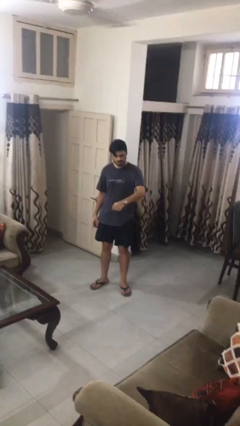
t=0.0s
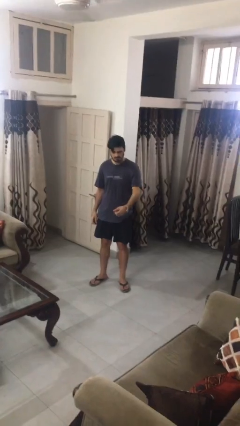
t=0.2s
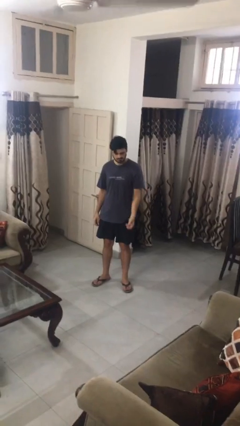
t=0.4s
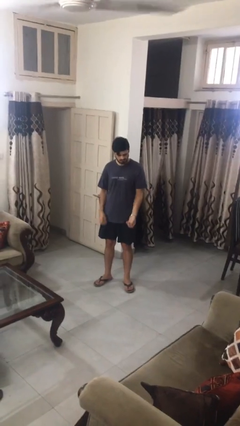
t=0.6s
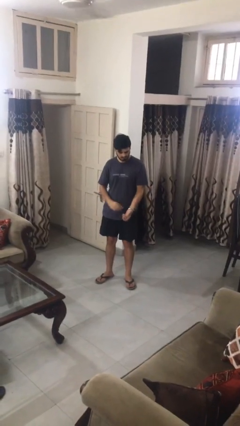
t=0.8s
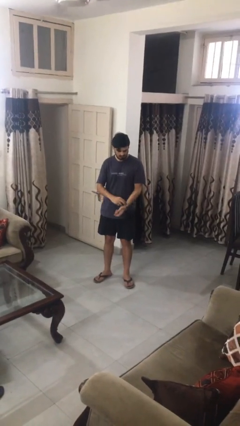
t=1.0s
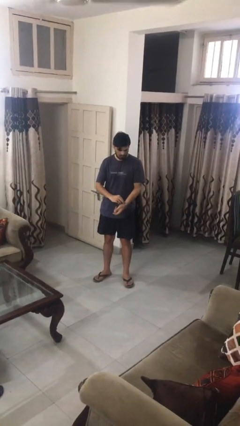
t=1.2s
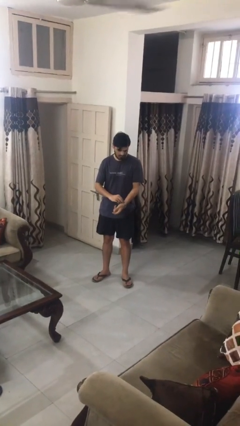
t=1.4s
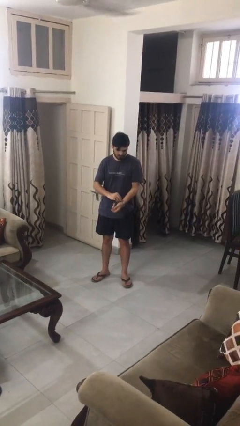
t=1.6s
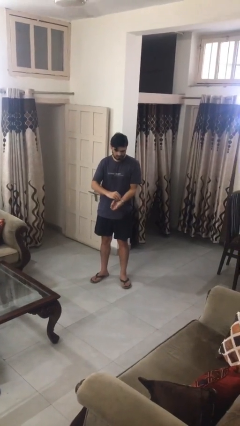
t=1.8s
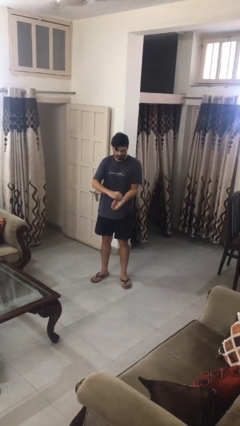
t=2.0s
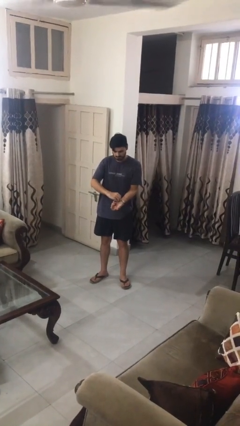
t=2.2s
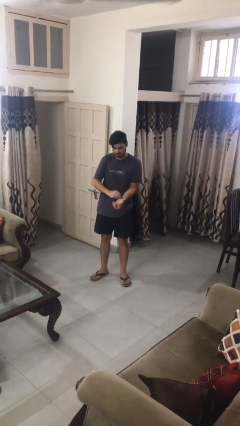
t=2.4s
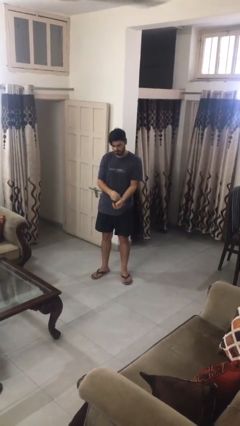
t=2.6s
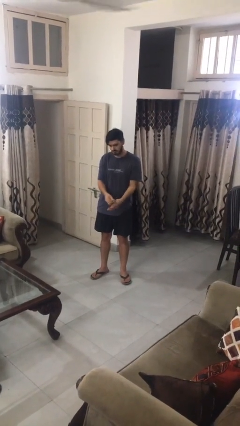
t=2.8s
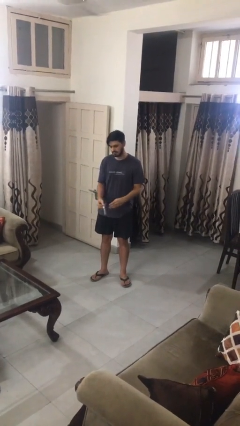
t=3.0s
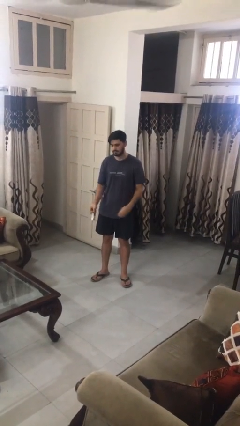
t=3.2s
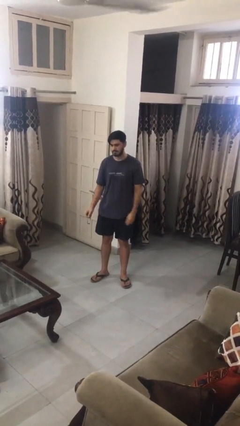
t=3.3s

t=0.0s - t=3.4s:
person takes off wristwatch

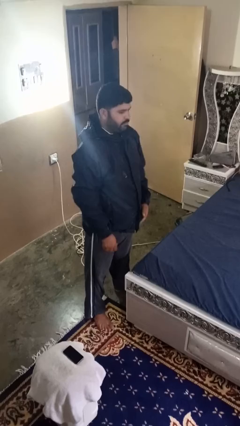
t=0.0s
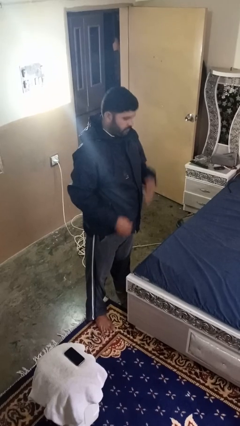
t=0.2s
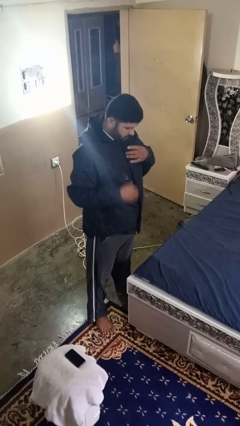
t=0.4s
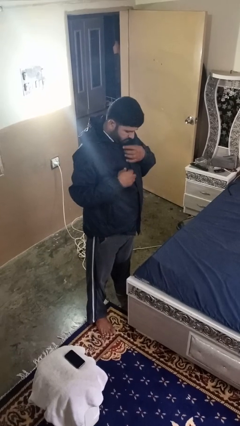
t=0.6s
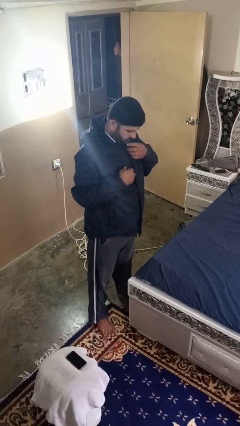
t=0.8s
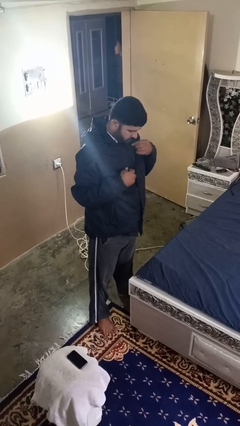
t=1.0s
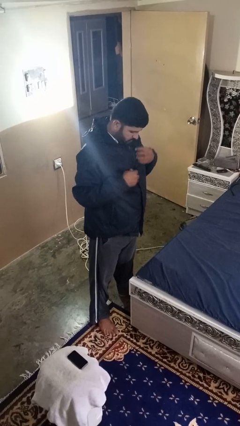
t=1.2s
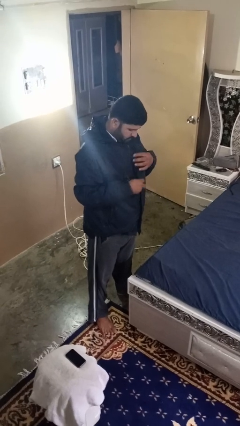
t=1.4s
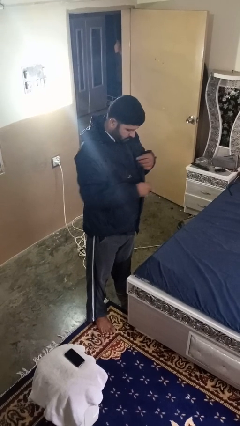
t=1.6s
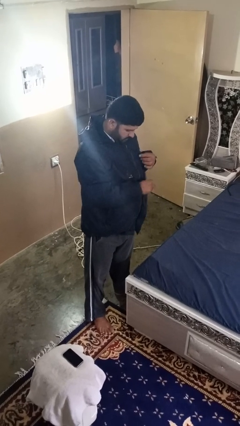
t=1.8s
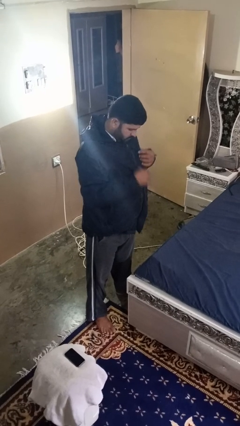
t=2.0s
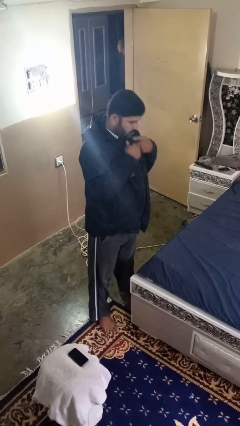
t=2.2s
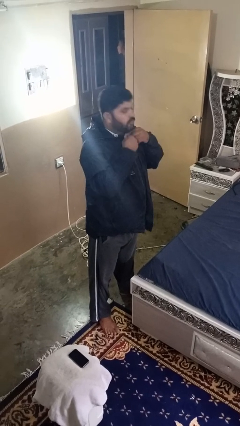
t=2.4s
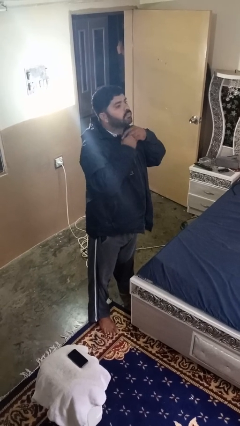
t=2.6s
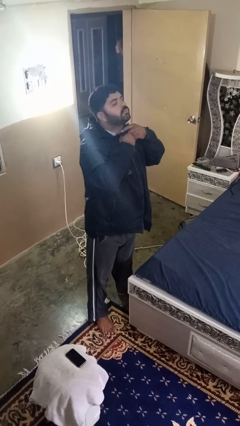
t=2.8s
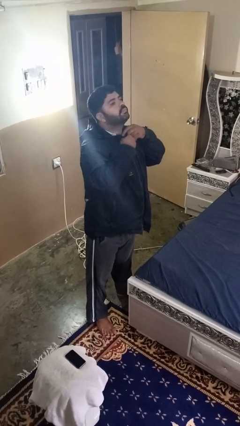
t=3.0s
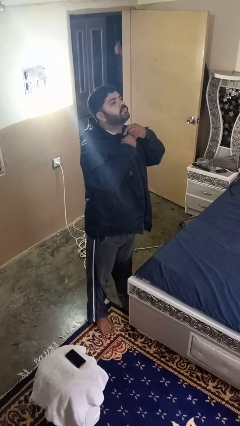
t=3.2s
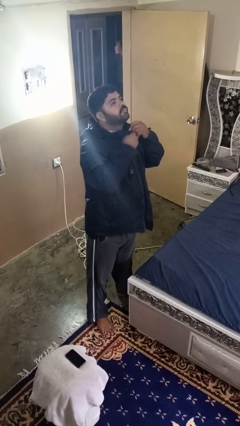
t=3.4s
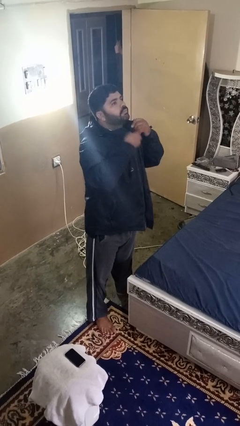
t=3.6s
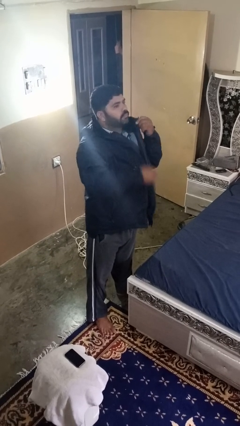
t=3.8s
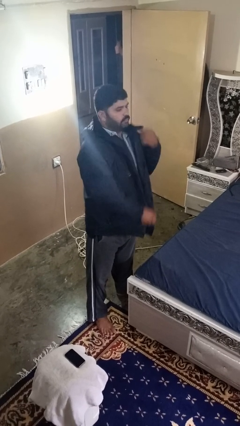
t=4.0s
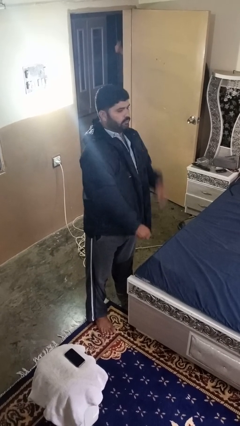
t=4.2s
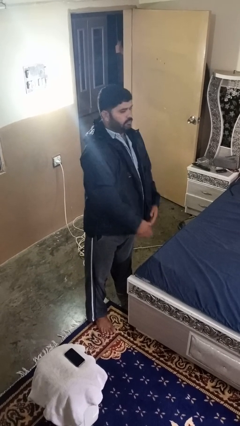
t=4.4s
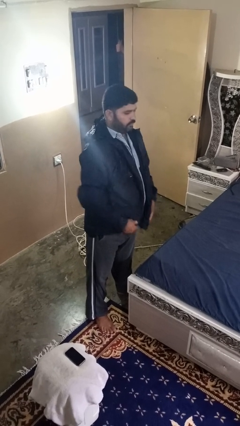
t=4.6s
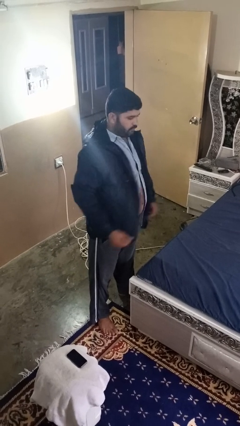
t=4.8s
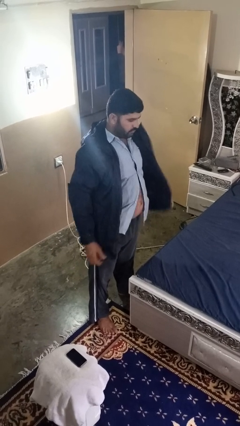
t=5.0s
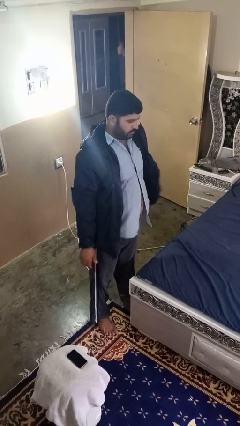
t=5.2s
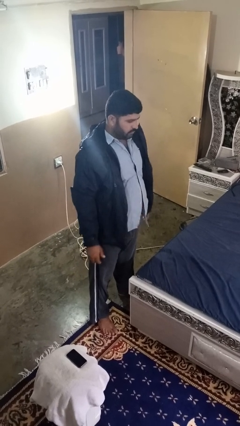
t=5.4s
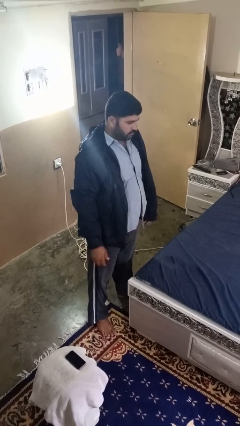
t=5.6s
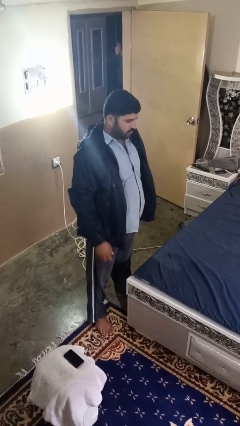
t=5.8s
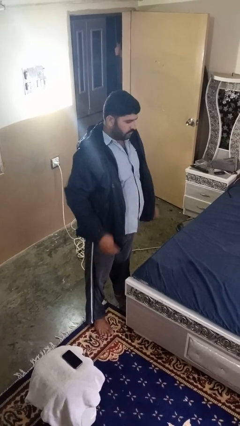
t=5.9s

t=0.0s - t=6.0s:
person unzips jacket

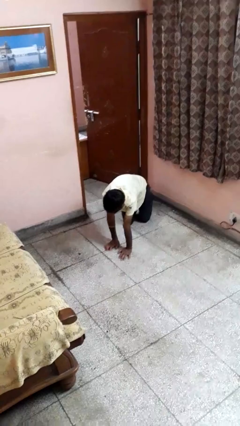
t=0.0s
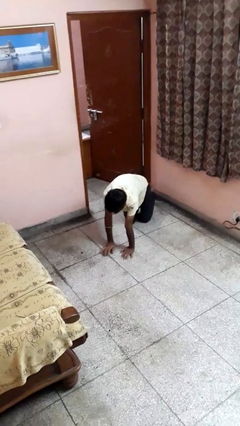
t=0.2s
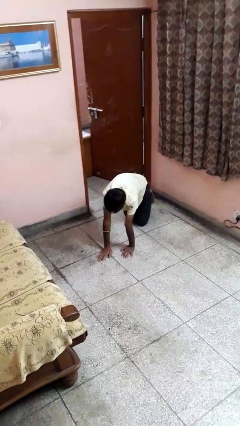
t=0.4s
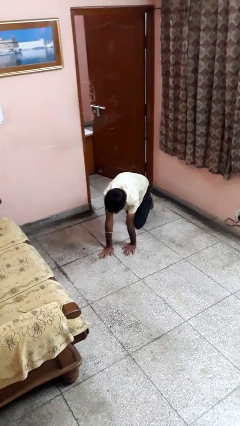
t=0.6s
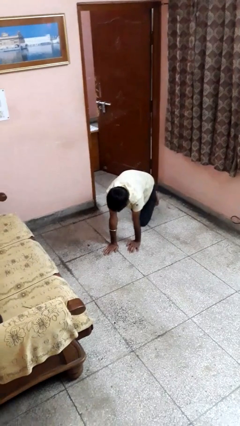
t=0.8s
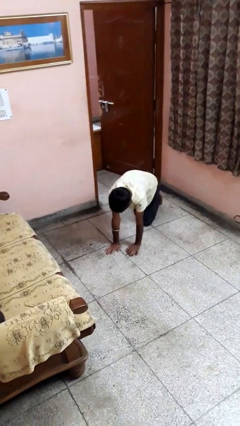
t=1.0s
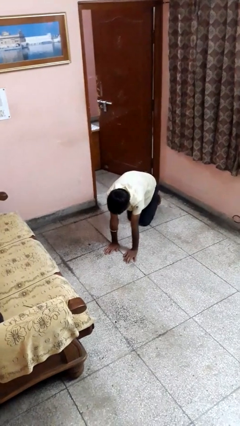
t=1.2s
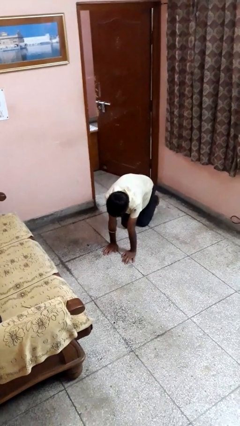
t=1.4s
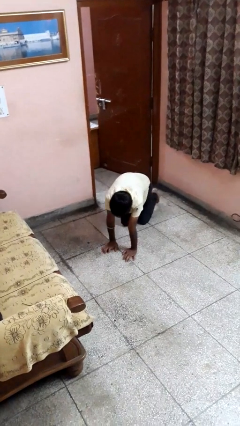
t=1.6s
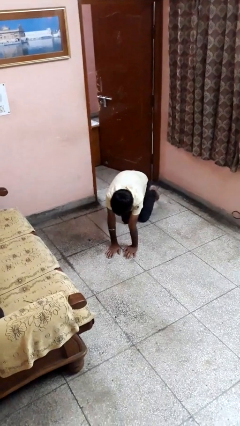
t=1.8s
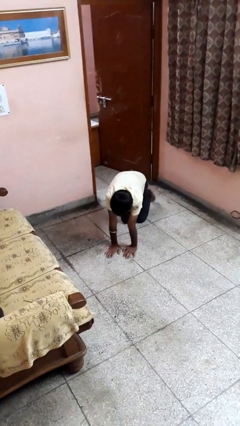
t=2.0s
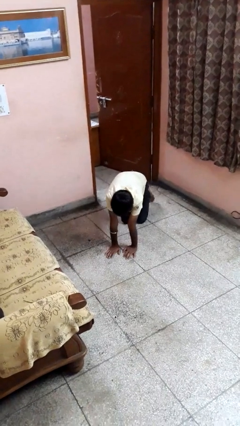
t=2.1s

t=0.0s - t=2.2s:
person crawls

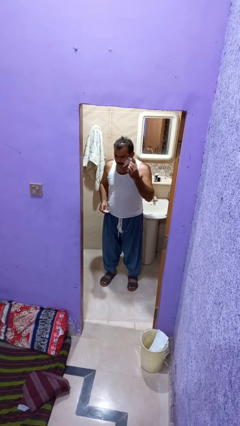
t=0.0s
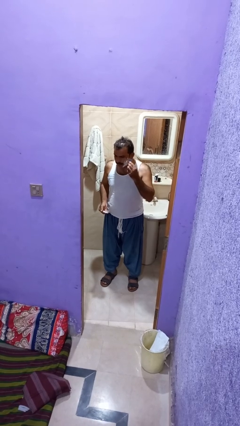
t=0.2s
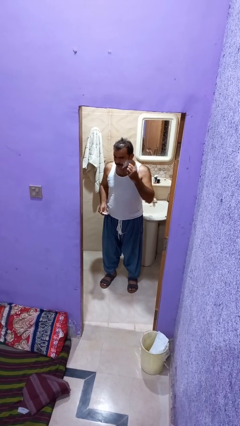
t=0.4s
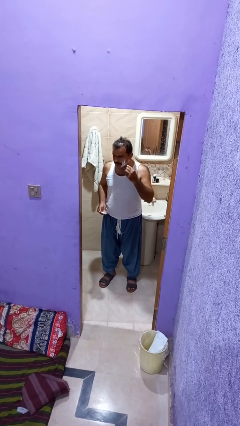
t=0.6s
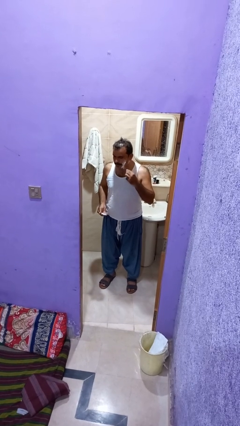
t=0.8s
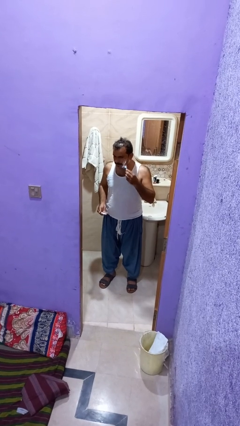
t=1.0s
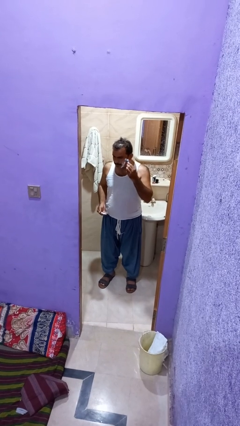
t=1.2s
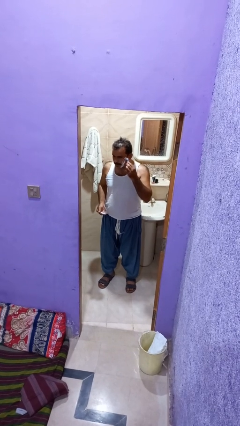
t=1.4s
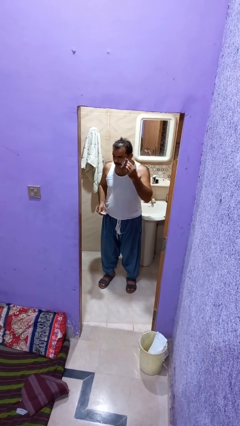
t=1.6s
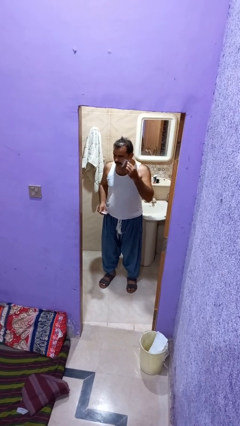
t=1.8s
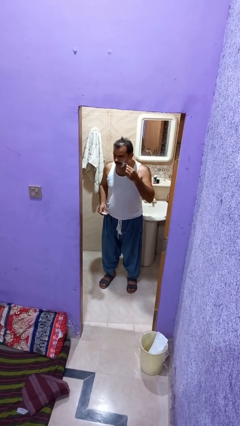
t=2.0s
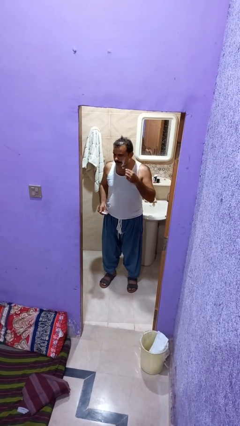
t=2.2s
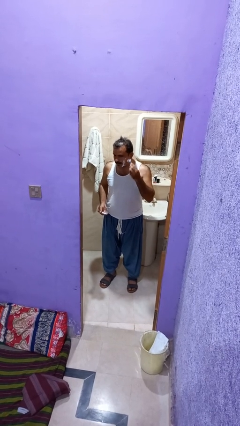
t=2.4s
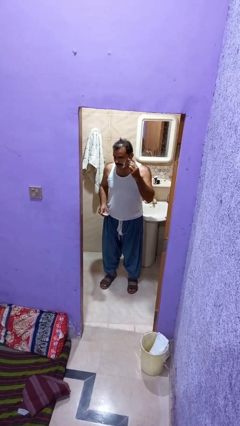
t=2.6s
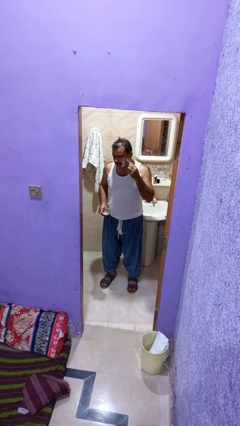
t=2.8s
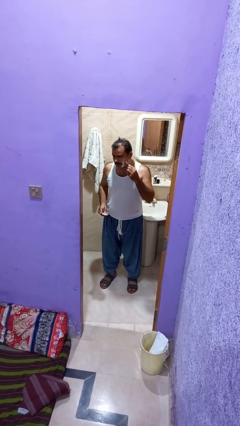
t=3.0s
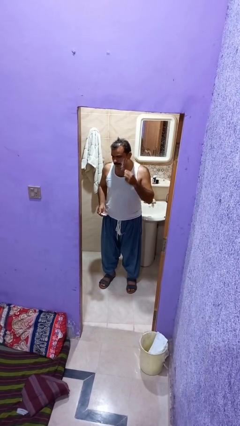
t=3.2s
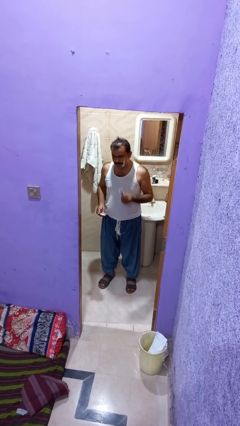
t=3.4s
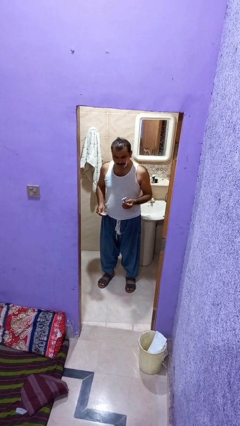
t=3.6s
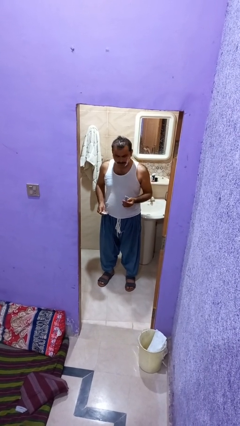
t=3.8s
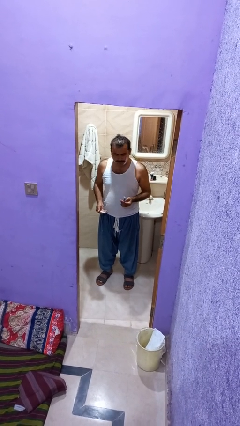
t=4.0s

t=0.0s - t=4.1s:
person shaves face

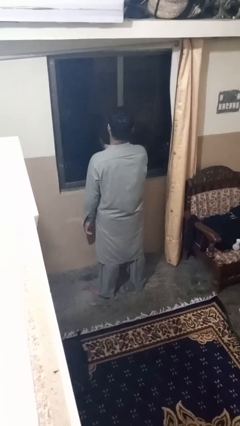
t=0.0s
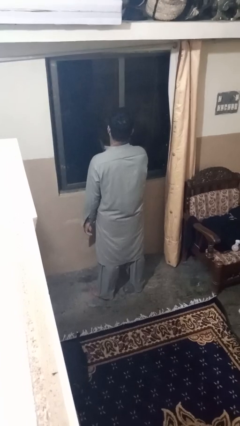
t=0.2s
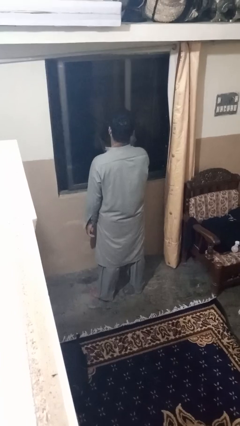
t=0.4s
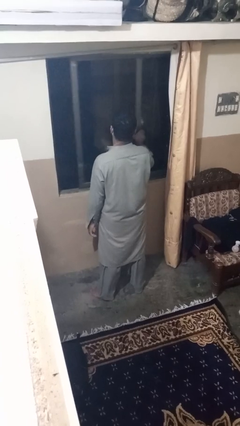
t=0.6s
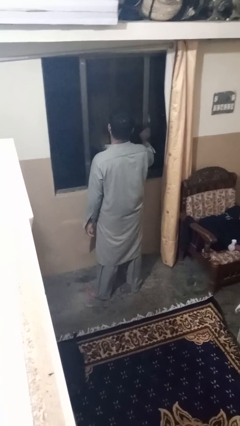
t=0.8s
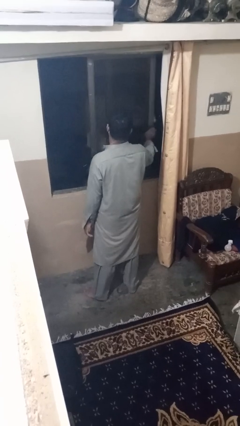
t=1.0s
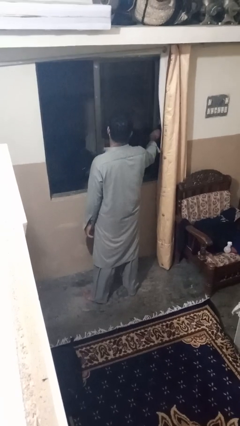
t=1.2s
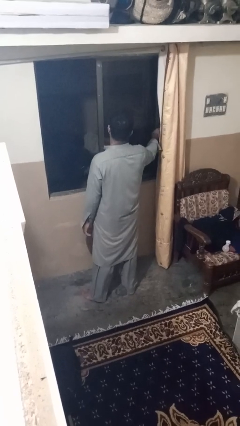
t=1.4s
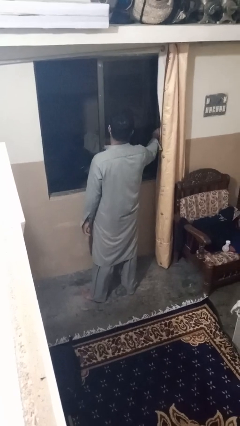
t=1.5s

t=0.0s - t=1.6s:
person opens home window

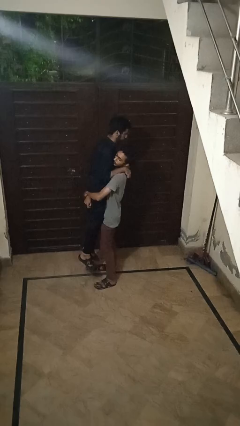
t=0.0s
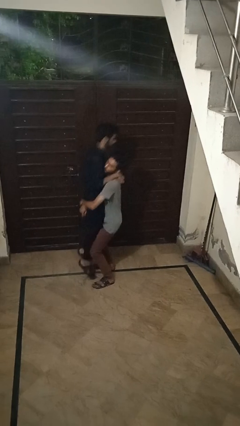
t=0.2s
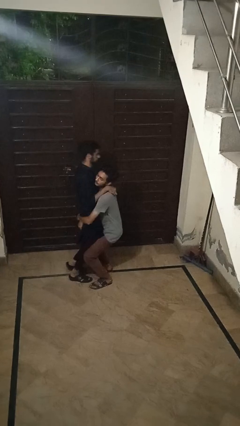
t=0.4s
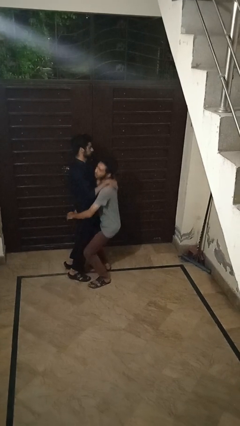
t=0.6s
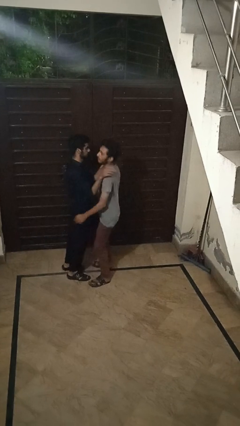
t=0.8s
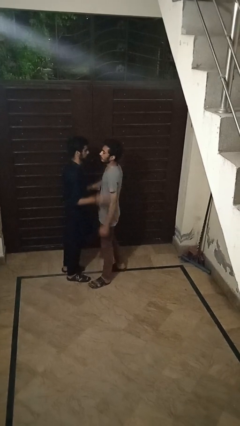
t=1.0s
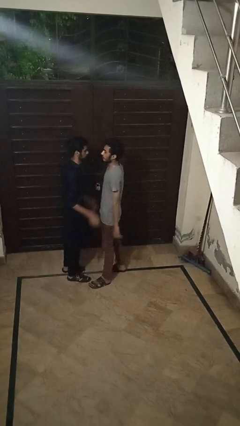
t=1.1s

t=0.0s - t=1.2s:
person puts down person
